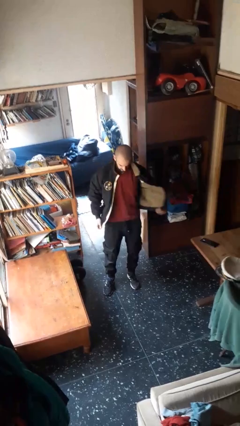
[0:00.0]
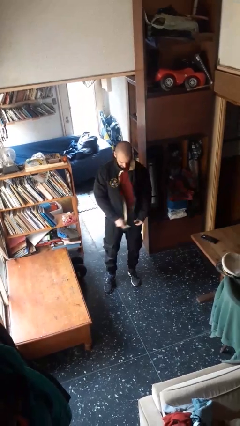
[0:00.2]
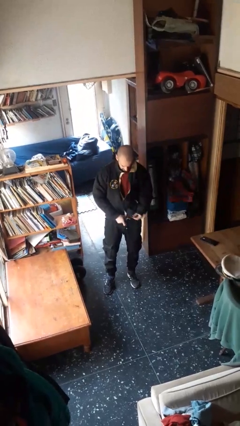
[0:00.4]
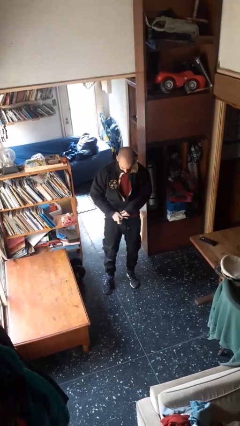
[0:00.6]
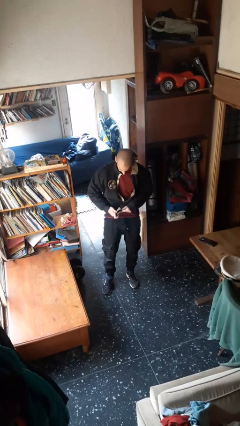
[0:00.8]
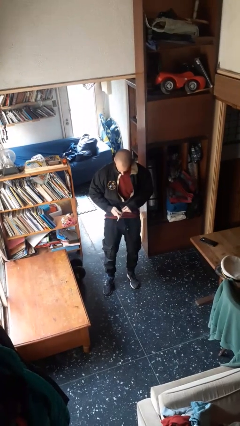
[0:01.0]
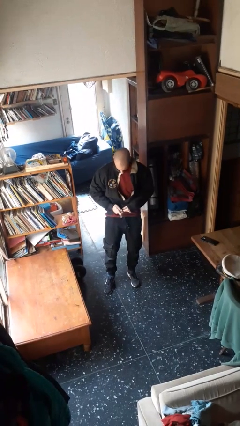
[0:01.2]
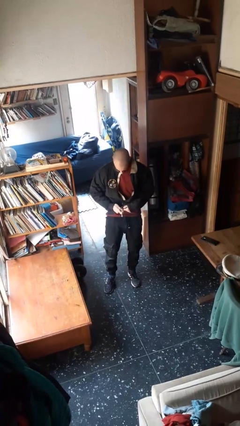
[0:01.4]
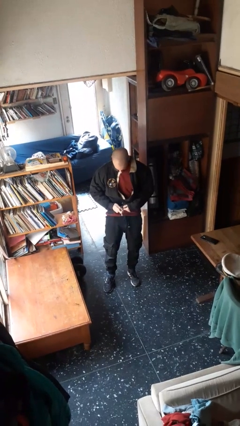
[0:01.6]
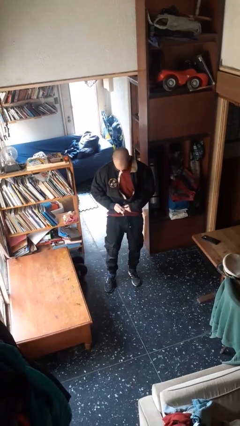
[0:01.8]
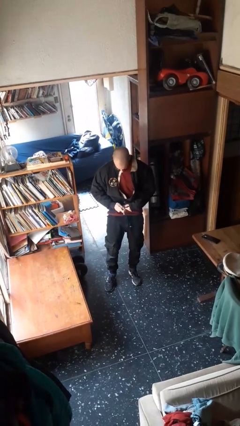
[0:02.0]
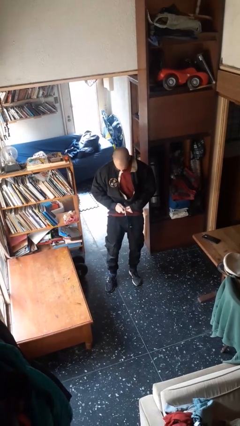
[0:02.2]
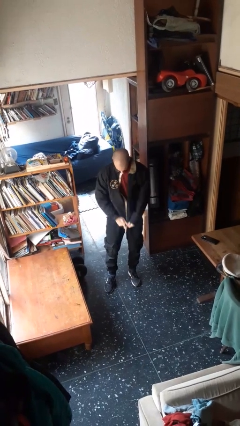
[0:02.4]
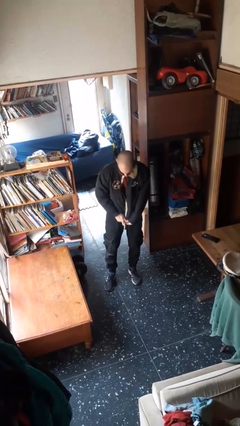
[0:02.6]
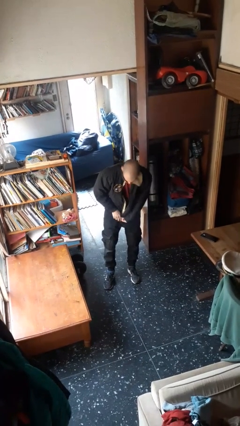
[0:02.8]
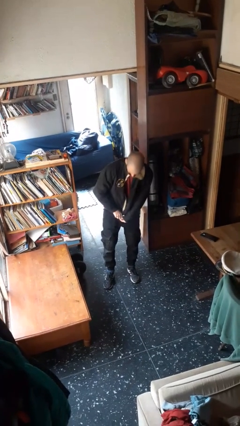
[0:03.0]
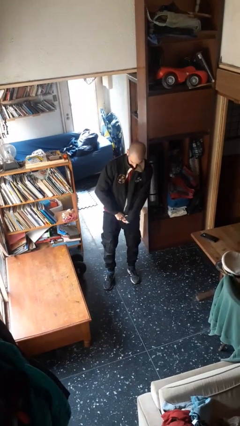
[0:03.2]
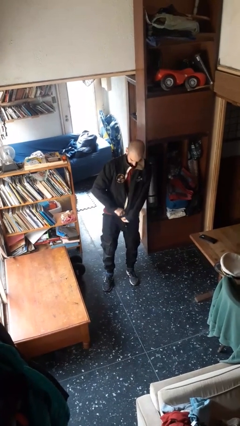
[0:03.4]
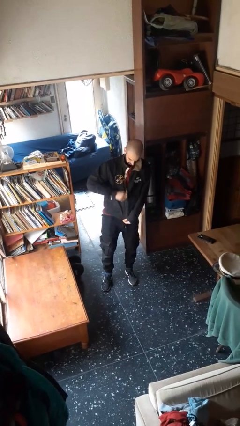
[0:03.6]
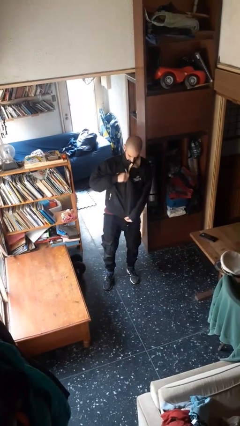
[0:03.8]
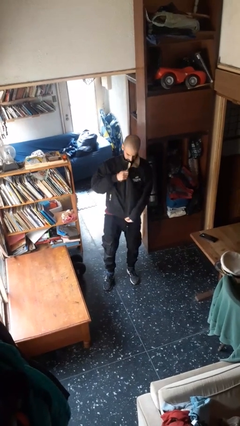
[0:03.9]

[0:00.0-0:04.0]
person zips up jacket

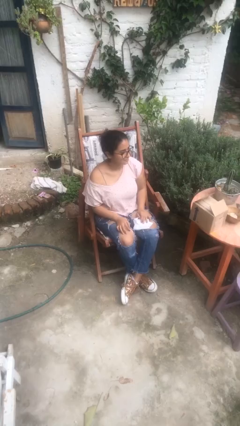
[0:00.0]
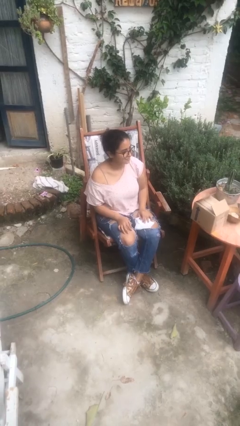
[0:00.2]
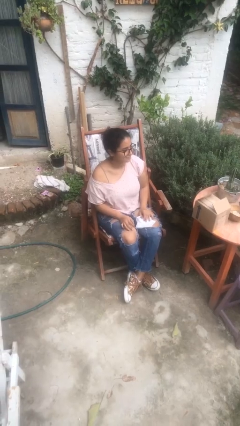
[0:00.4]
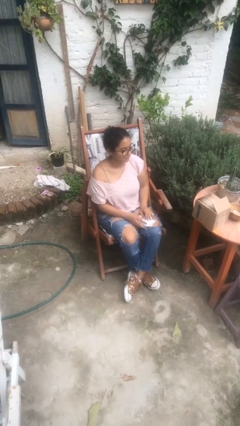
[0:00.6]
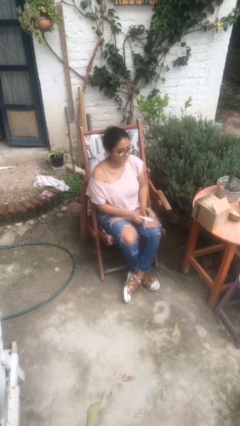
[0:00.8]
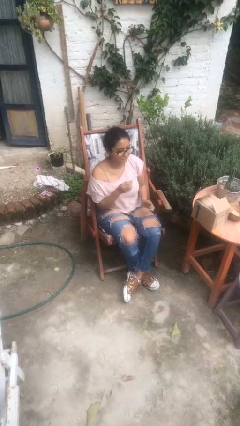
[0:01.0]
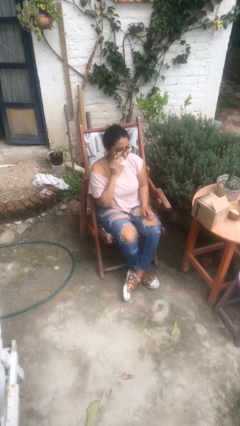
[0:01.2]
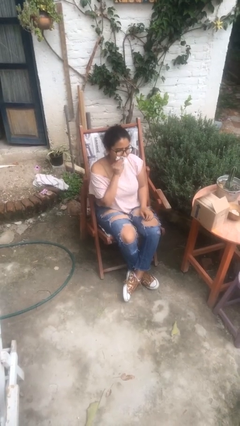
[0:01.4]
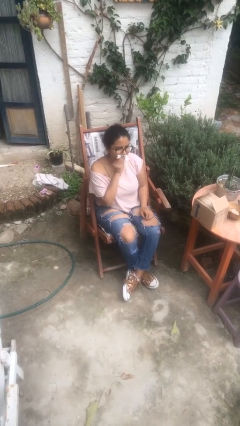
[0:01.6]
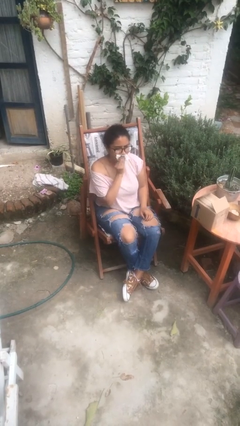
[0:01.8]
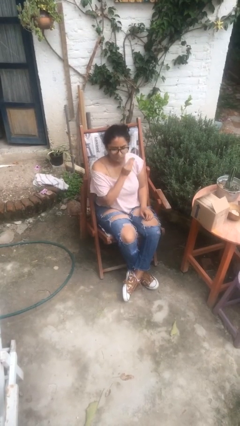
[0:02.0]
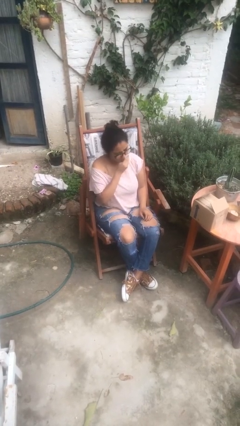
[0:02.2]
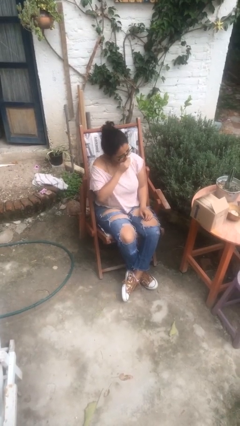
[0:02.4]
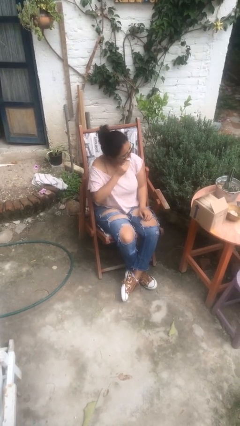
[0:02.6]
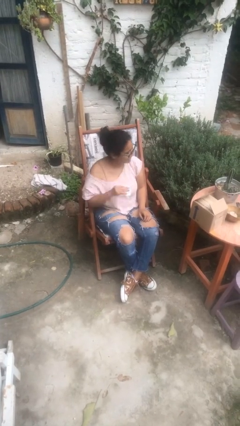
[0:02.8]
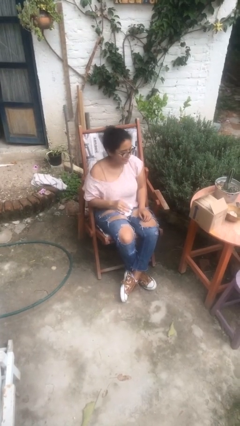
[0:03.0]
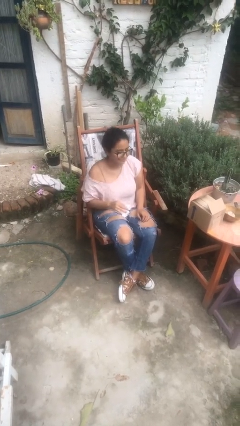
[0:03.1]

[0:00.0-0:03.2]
person wipes mouth with napkin

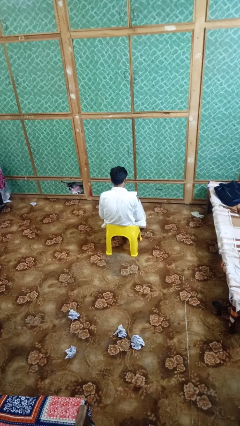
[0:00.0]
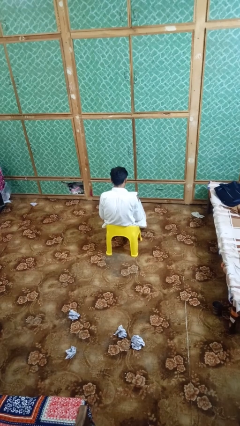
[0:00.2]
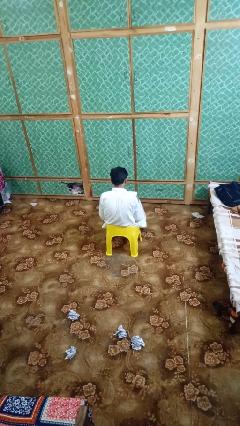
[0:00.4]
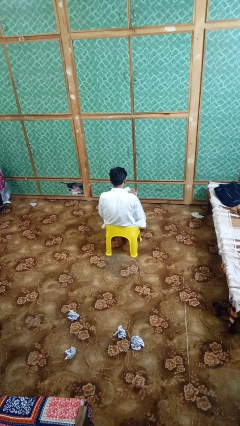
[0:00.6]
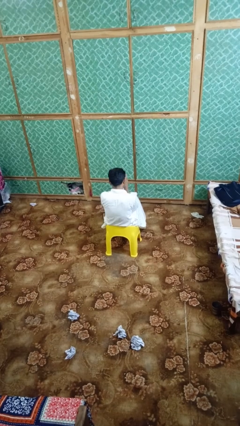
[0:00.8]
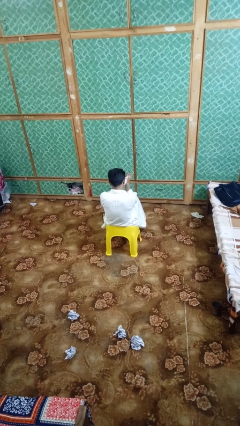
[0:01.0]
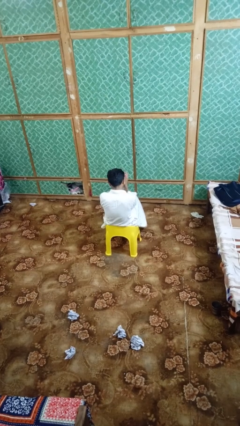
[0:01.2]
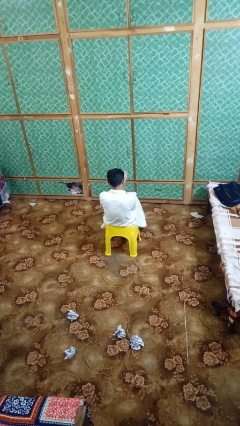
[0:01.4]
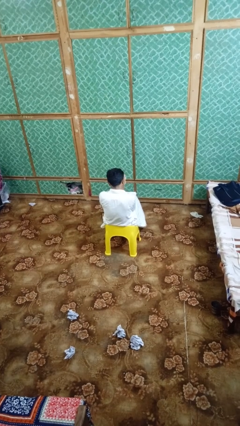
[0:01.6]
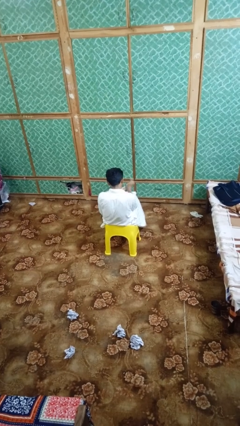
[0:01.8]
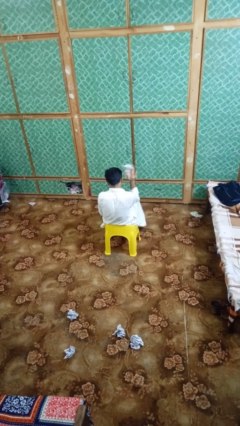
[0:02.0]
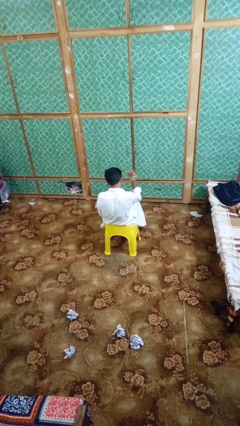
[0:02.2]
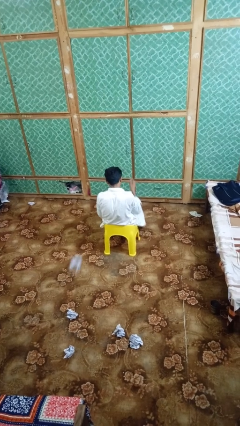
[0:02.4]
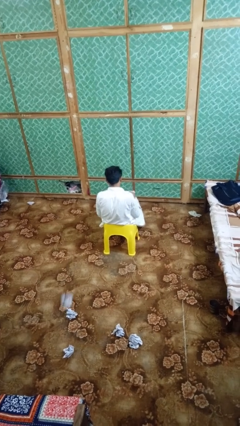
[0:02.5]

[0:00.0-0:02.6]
person crumples paper

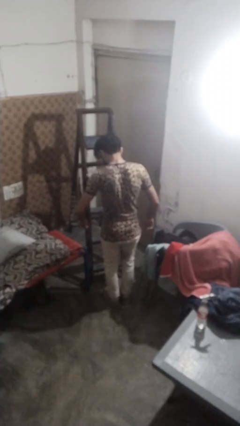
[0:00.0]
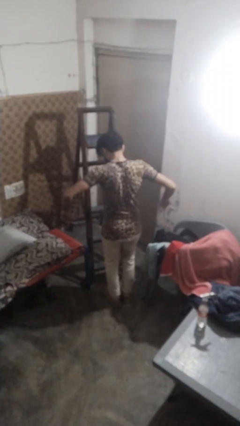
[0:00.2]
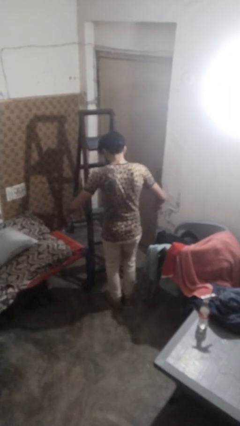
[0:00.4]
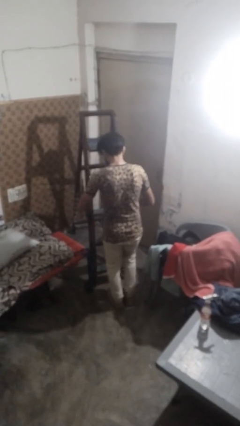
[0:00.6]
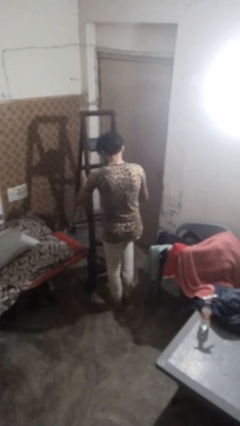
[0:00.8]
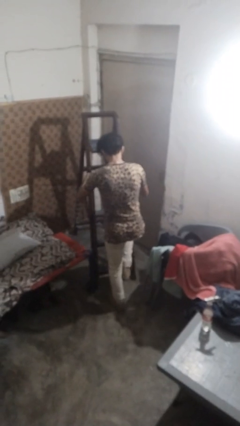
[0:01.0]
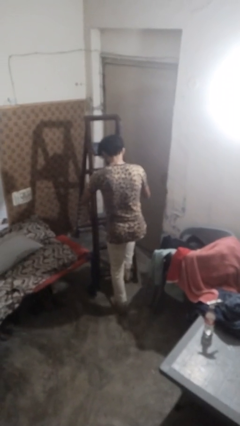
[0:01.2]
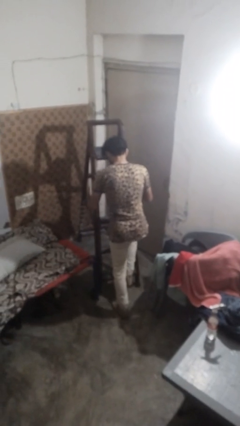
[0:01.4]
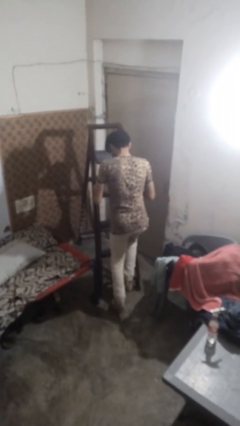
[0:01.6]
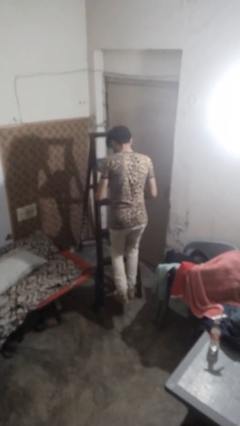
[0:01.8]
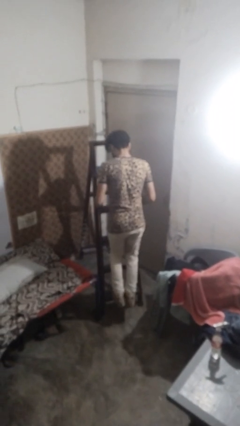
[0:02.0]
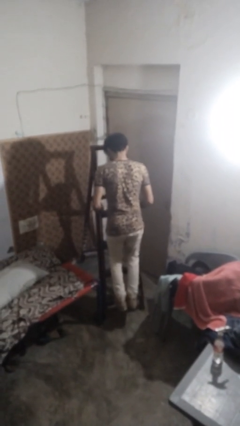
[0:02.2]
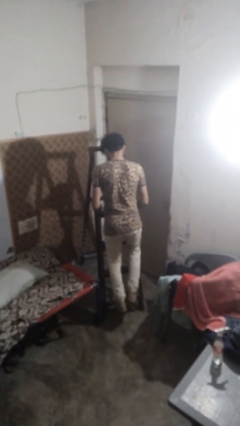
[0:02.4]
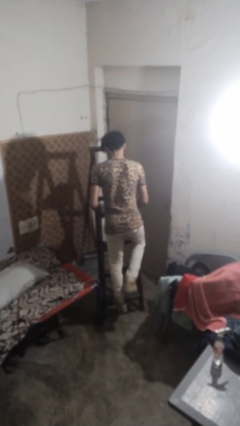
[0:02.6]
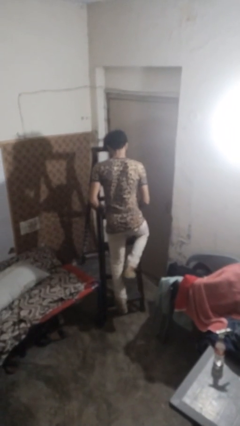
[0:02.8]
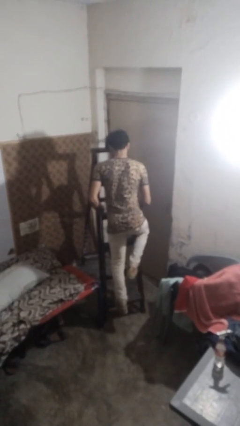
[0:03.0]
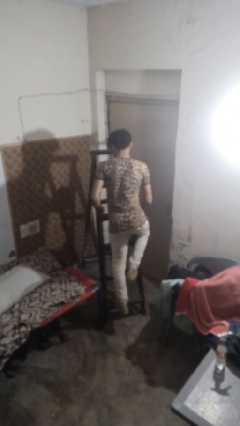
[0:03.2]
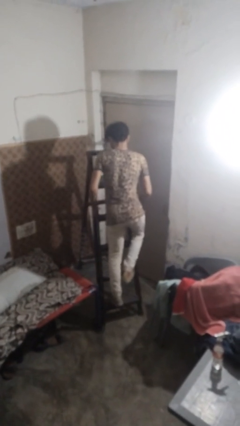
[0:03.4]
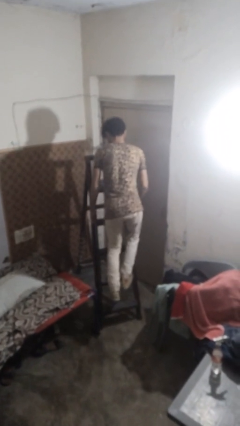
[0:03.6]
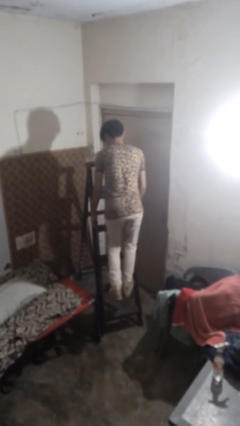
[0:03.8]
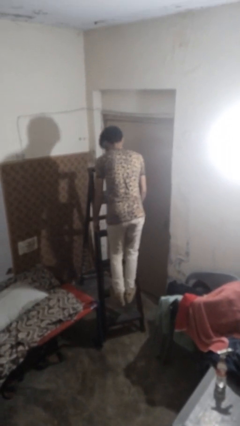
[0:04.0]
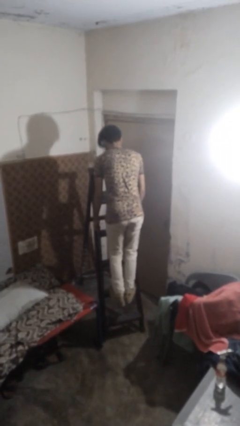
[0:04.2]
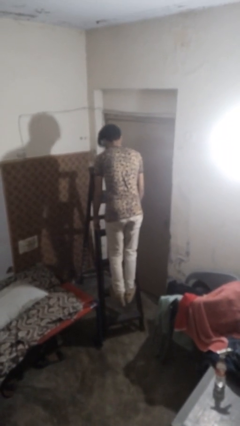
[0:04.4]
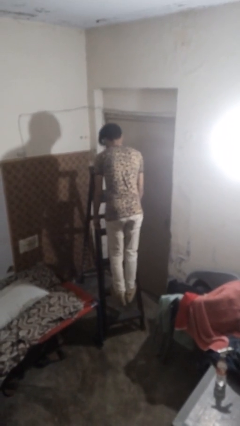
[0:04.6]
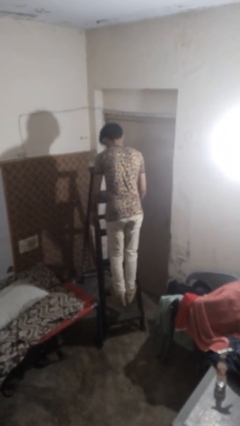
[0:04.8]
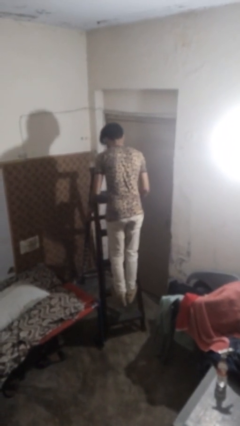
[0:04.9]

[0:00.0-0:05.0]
person climbs up ladder

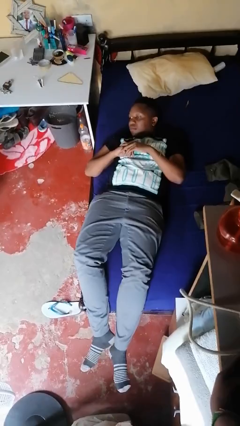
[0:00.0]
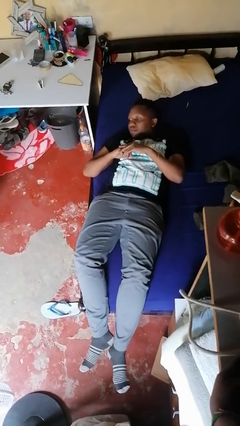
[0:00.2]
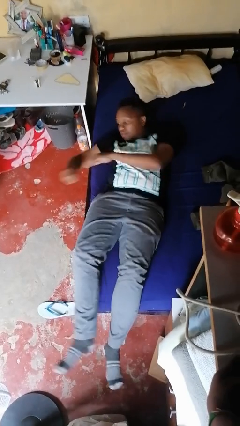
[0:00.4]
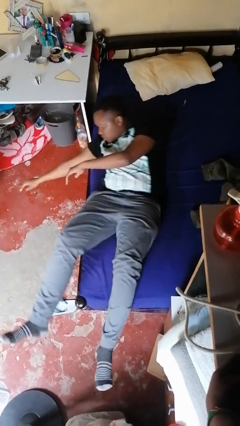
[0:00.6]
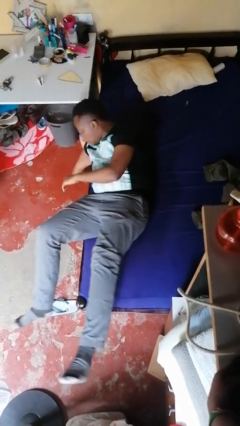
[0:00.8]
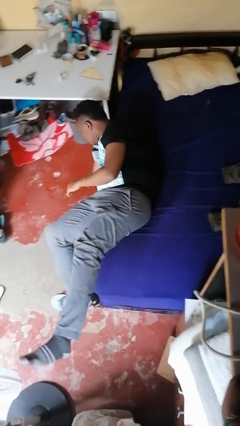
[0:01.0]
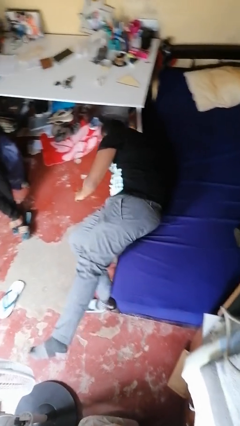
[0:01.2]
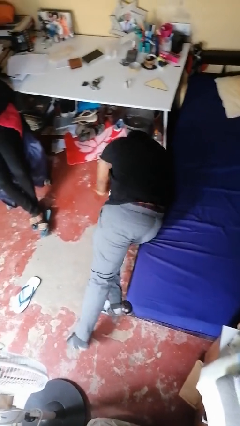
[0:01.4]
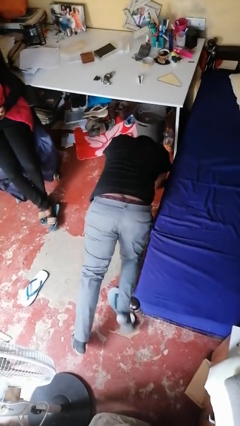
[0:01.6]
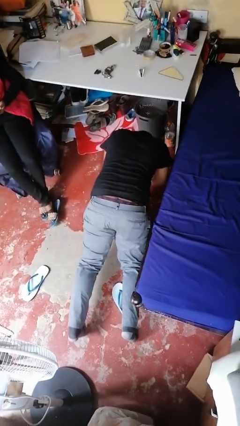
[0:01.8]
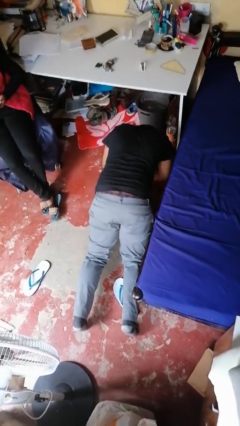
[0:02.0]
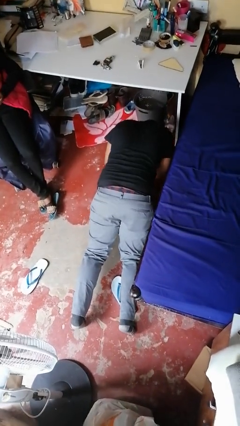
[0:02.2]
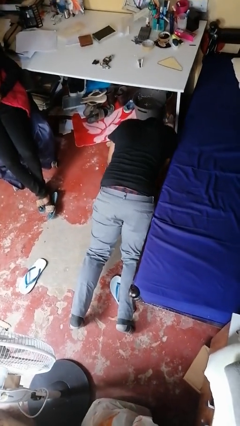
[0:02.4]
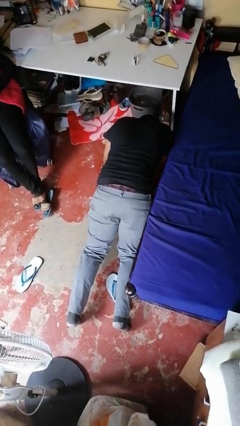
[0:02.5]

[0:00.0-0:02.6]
person falls from bed
